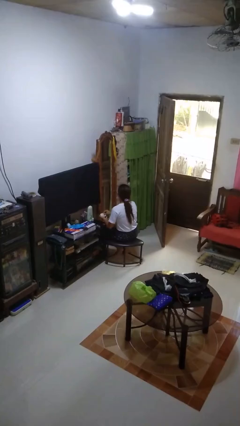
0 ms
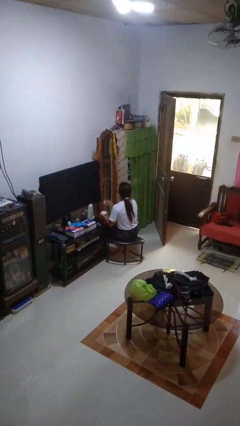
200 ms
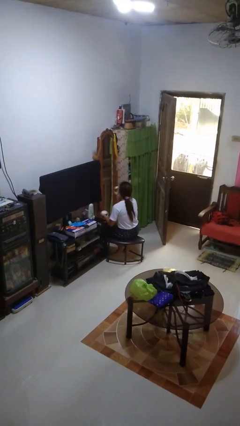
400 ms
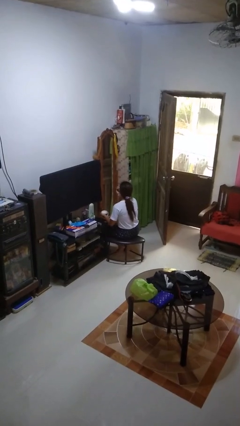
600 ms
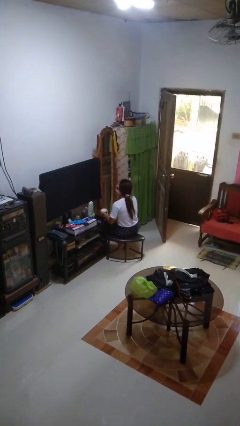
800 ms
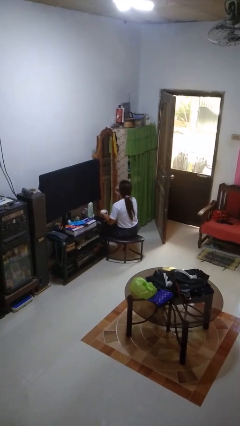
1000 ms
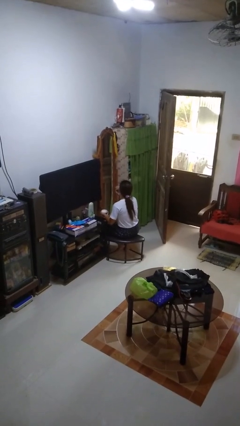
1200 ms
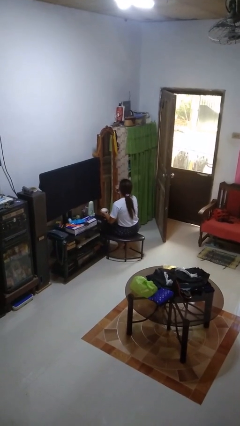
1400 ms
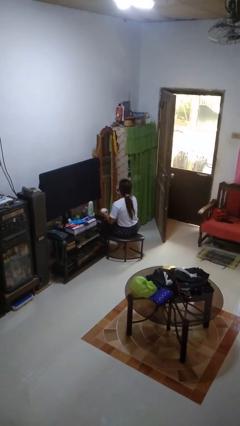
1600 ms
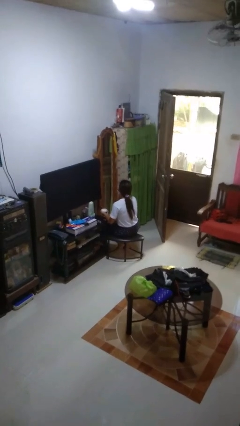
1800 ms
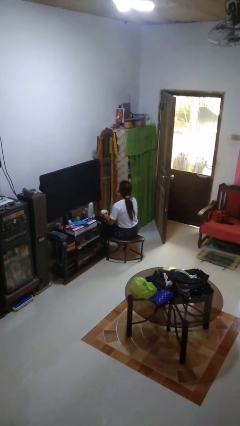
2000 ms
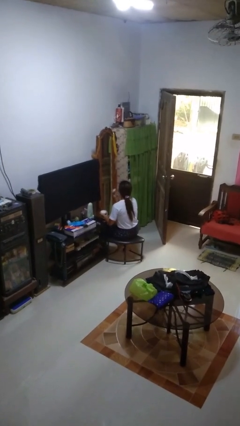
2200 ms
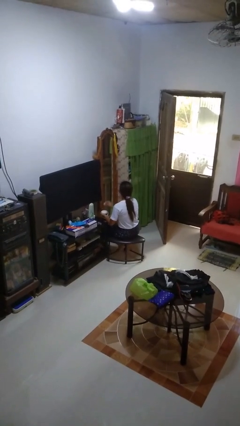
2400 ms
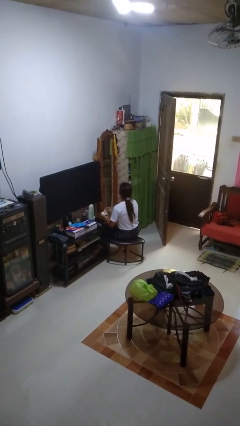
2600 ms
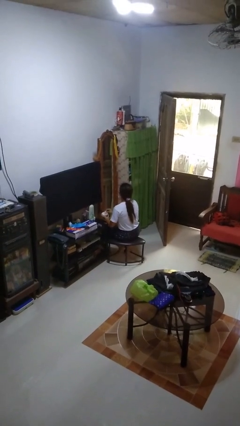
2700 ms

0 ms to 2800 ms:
person applies foundation makeup

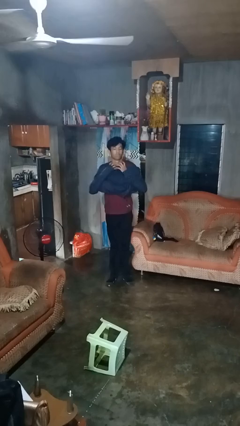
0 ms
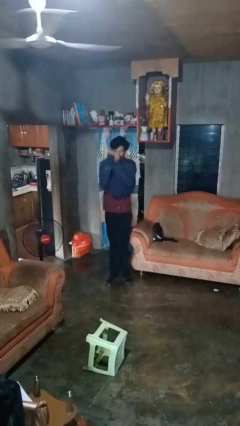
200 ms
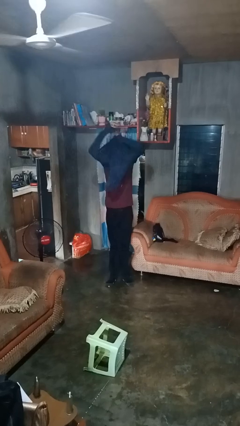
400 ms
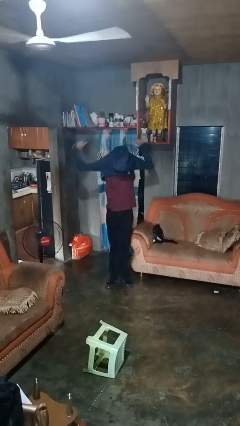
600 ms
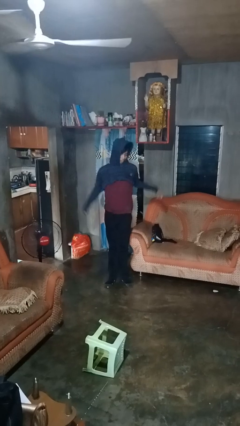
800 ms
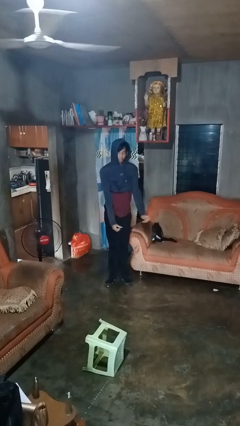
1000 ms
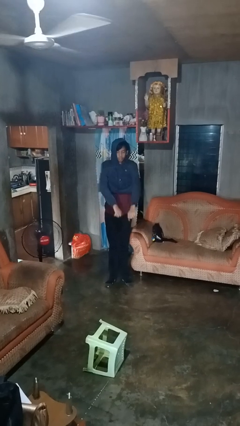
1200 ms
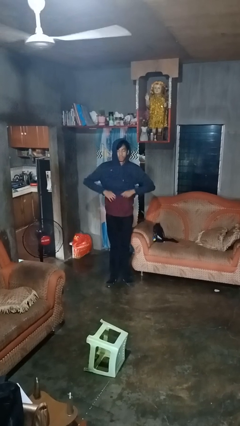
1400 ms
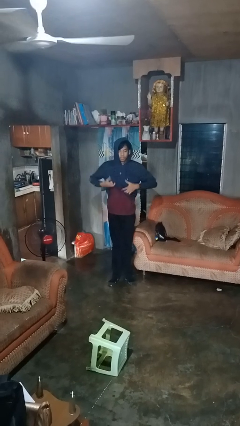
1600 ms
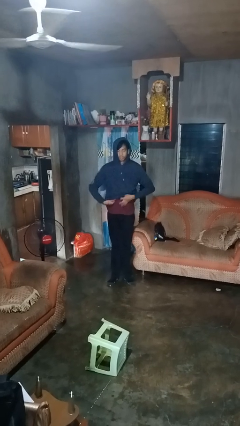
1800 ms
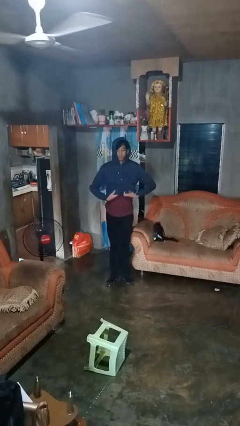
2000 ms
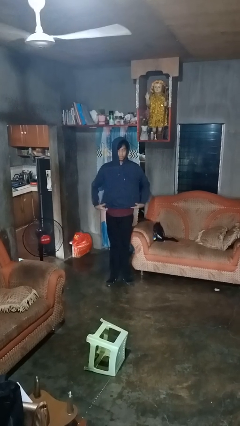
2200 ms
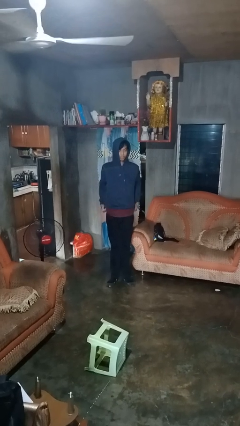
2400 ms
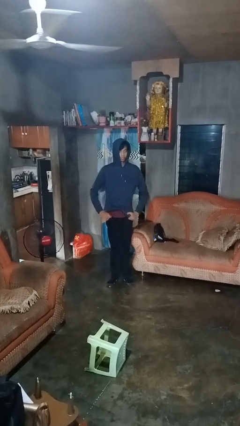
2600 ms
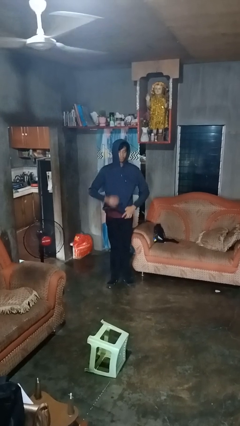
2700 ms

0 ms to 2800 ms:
person puts on hoodie

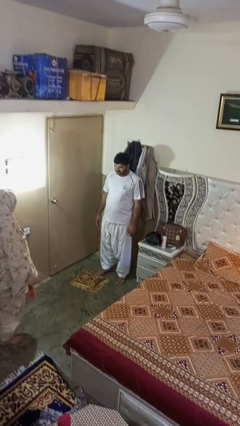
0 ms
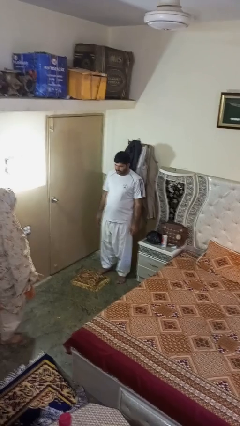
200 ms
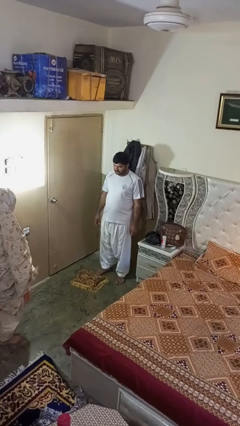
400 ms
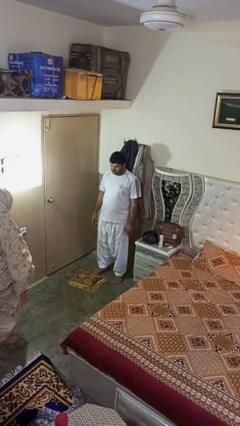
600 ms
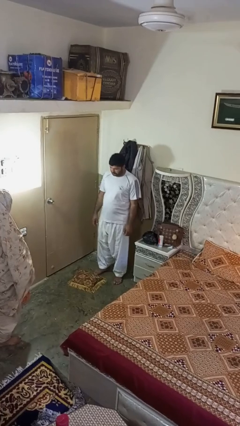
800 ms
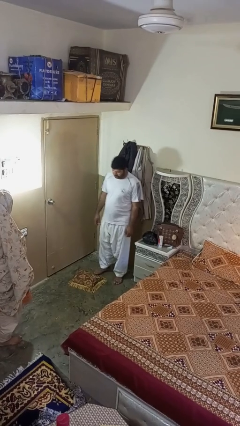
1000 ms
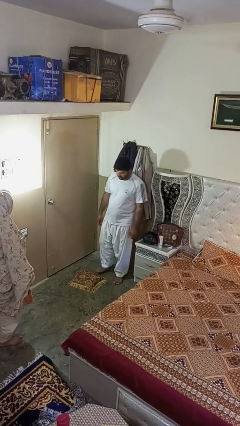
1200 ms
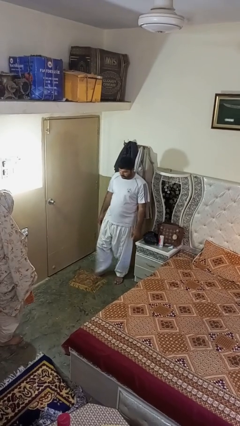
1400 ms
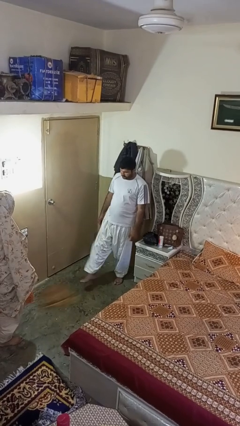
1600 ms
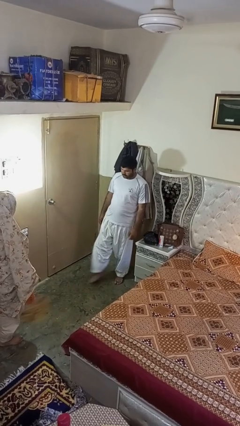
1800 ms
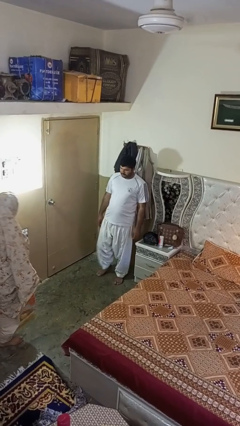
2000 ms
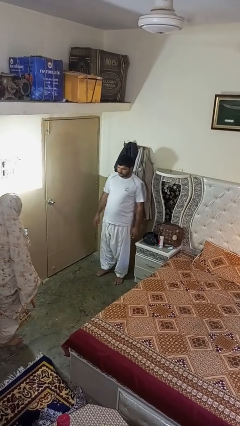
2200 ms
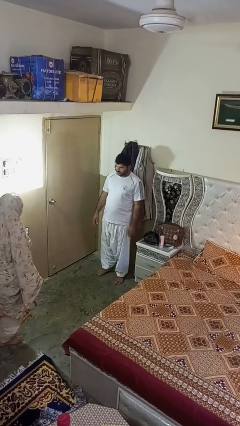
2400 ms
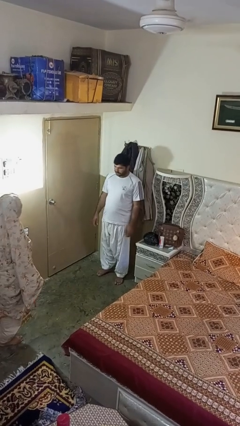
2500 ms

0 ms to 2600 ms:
person kicks object to person

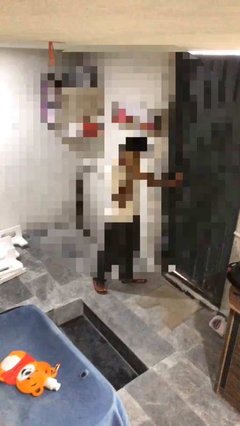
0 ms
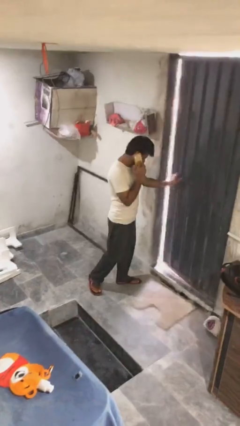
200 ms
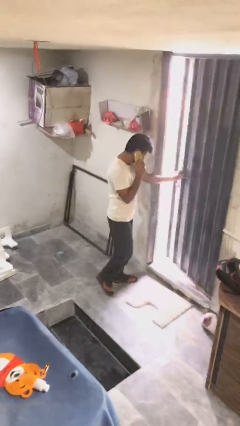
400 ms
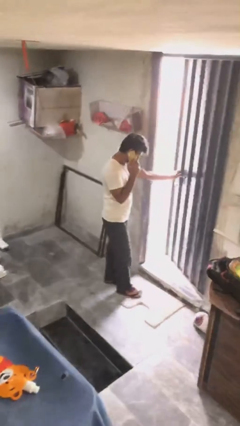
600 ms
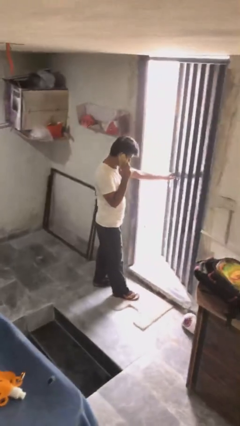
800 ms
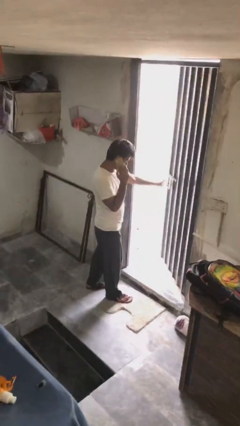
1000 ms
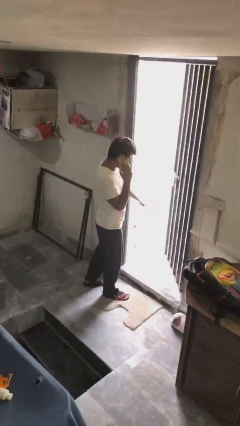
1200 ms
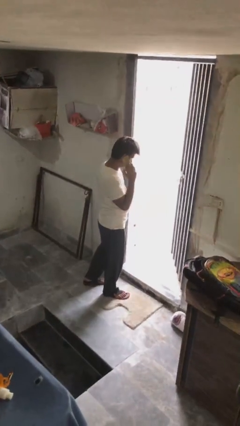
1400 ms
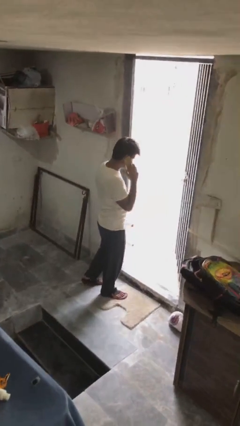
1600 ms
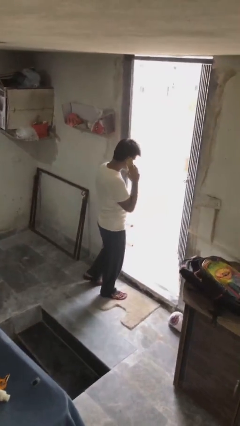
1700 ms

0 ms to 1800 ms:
person opens facility door

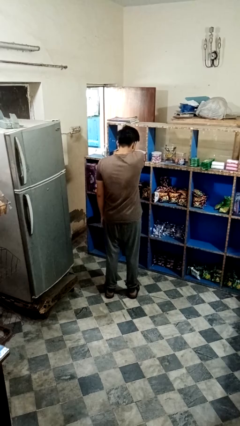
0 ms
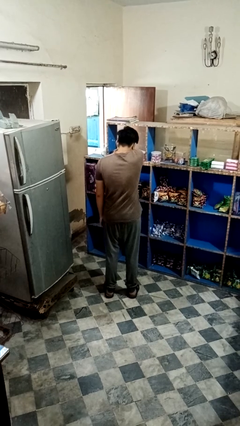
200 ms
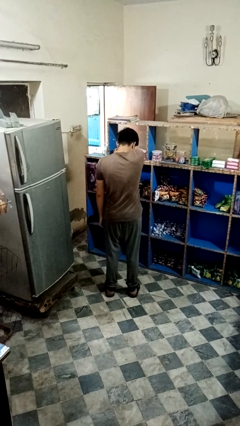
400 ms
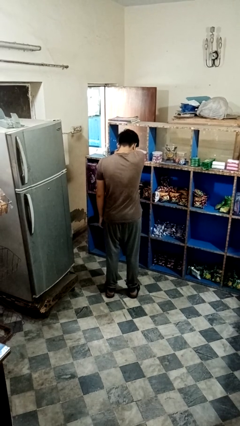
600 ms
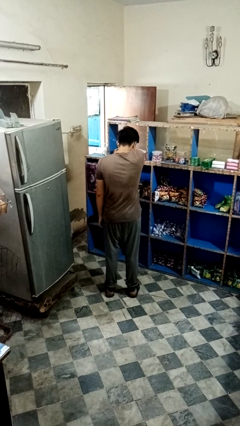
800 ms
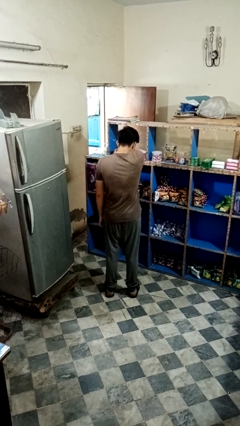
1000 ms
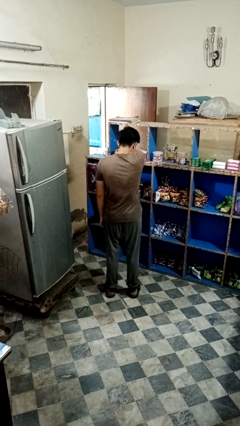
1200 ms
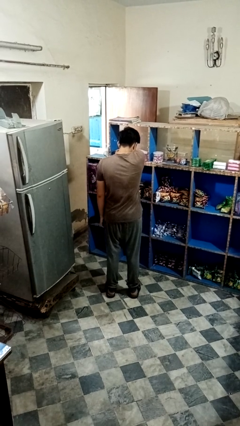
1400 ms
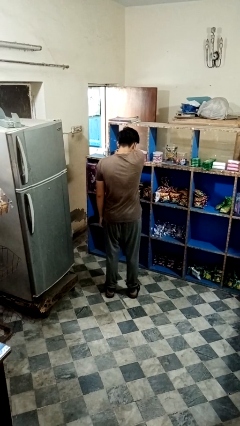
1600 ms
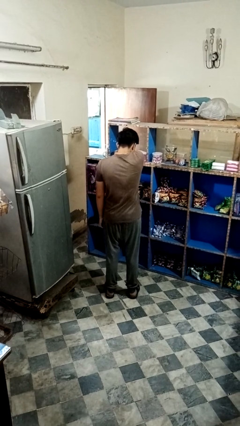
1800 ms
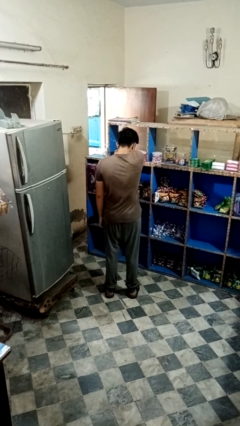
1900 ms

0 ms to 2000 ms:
person sneezes into arm

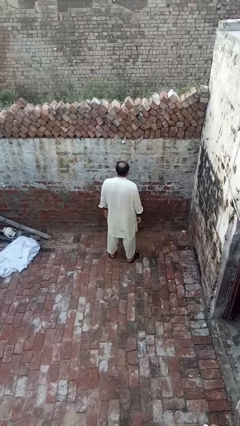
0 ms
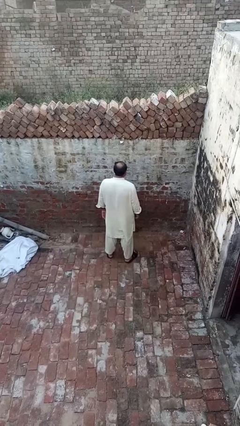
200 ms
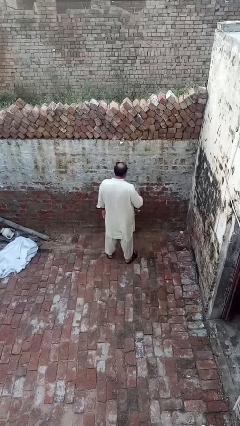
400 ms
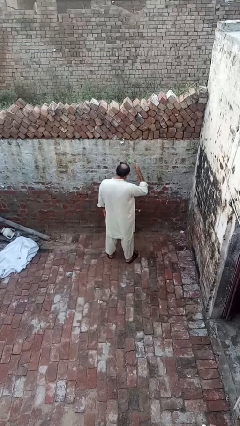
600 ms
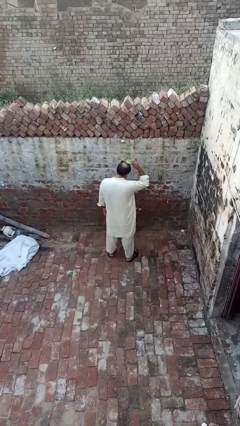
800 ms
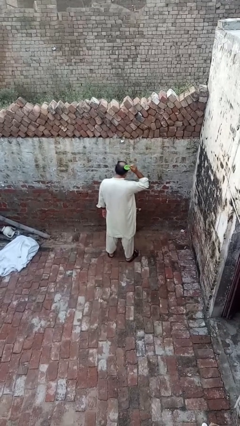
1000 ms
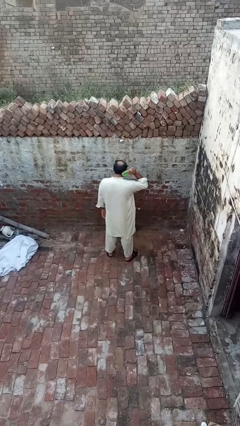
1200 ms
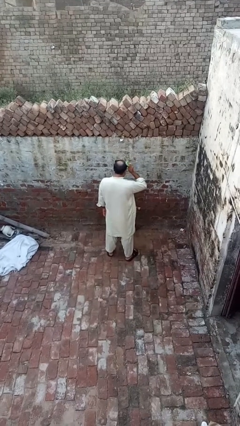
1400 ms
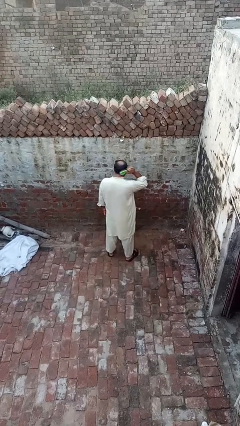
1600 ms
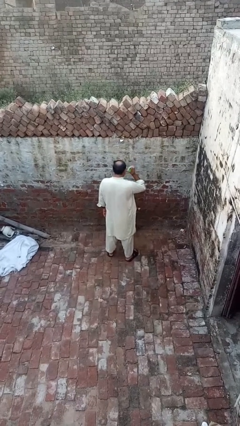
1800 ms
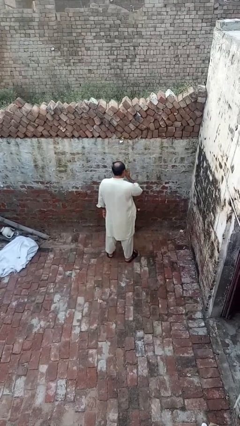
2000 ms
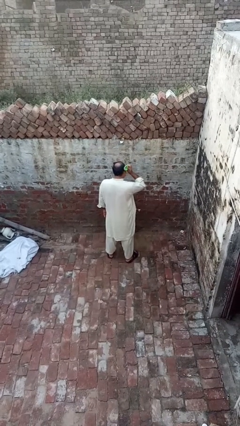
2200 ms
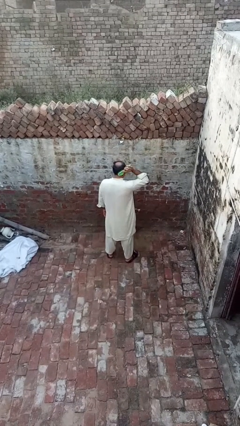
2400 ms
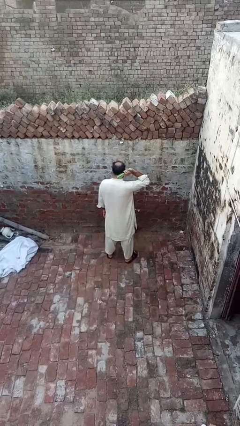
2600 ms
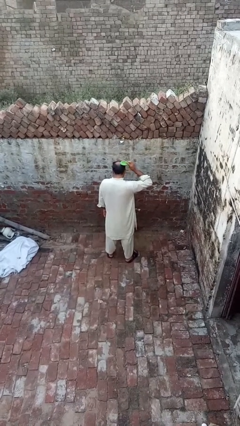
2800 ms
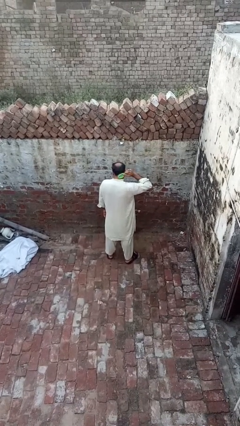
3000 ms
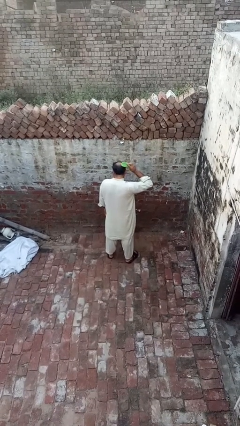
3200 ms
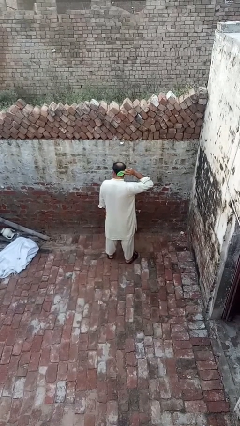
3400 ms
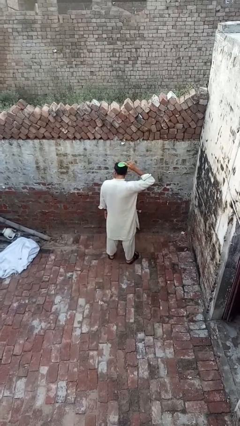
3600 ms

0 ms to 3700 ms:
person brushes hair

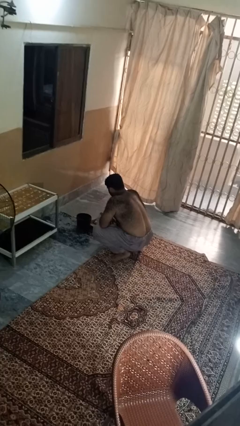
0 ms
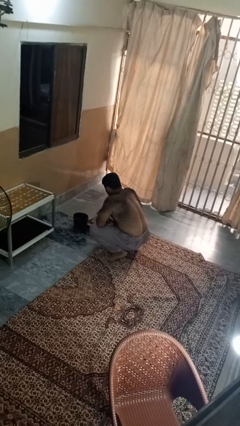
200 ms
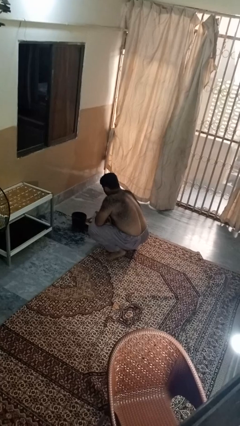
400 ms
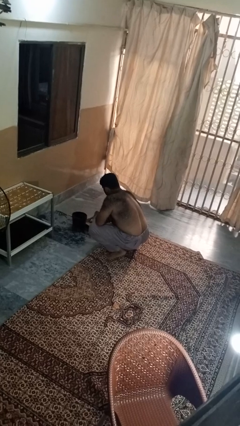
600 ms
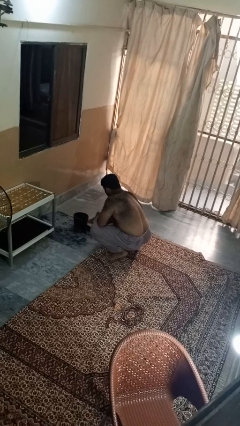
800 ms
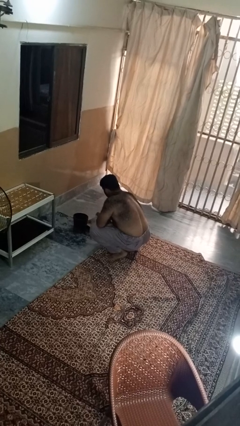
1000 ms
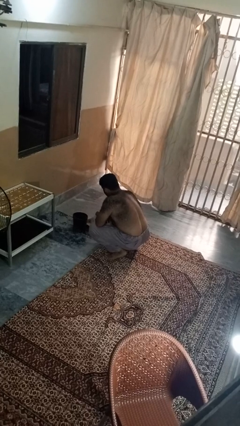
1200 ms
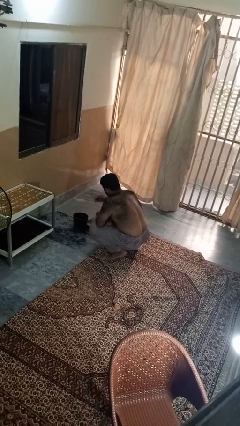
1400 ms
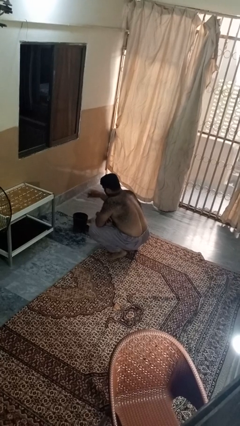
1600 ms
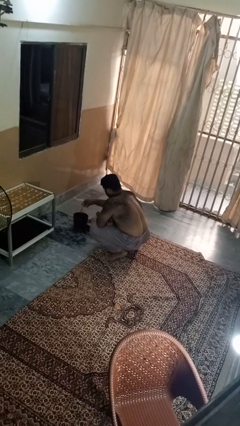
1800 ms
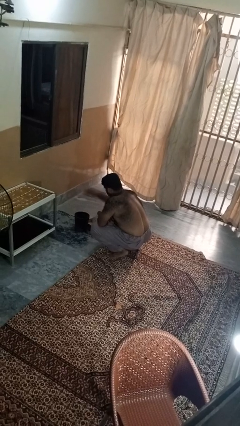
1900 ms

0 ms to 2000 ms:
person discards trash
